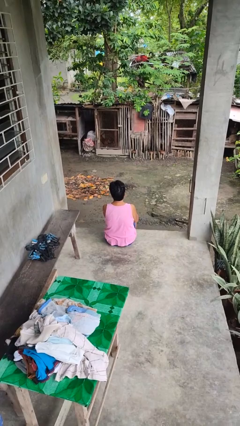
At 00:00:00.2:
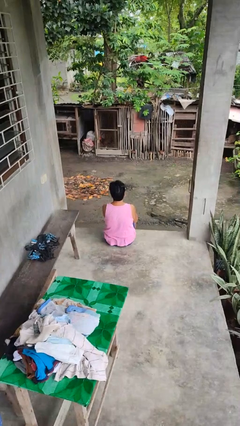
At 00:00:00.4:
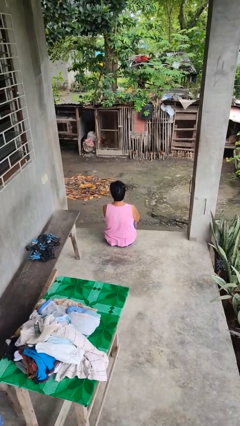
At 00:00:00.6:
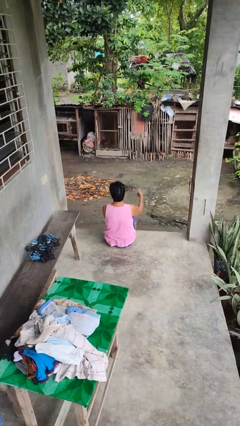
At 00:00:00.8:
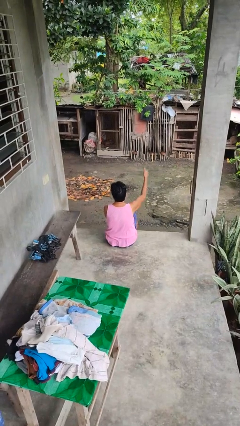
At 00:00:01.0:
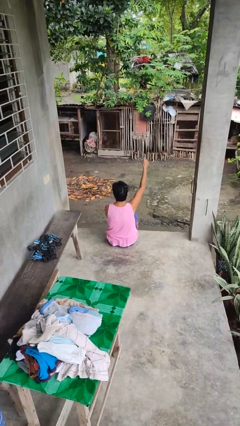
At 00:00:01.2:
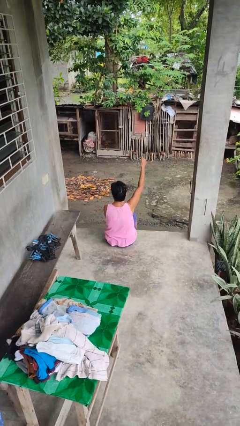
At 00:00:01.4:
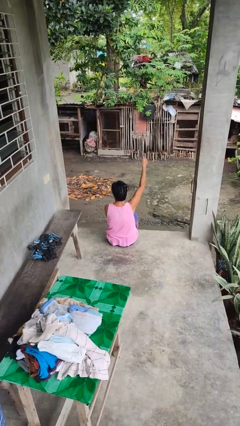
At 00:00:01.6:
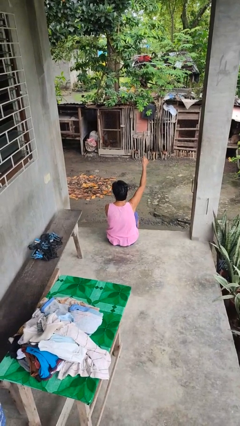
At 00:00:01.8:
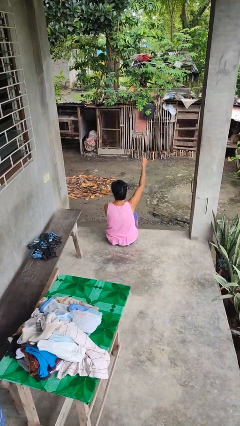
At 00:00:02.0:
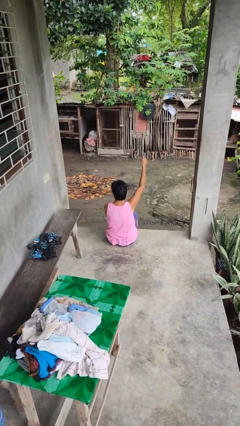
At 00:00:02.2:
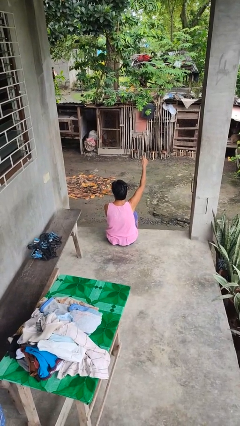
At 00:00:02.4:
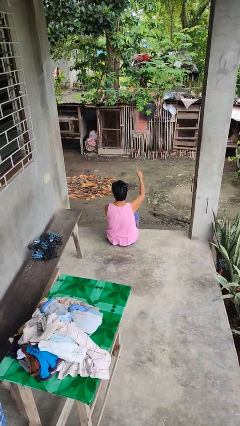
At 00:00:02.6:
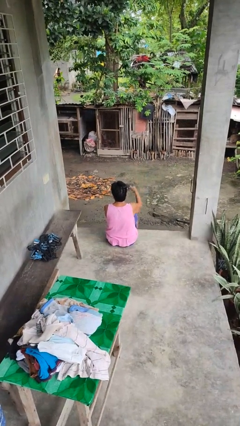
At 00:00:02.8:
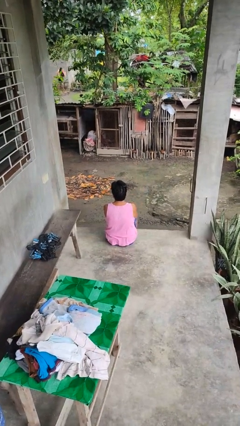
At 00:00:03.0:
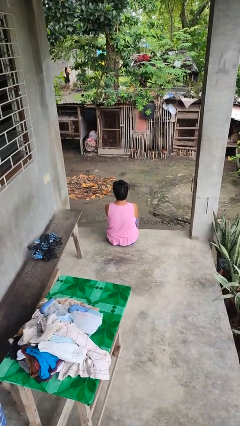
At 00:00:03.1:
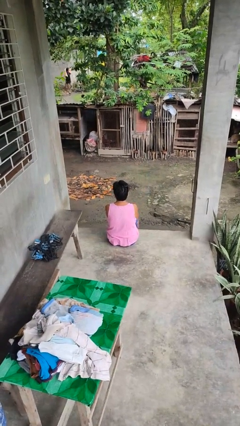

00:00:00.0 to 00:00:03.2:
person gestures thumbs up

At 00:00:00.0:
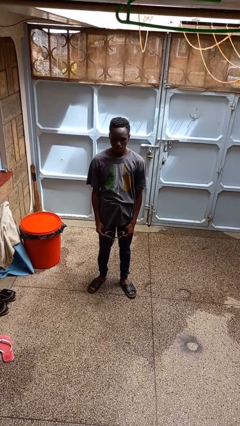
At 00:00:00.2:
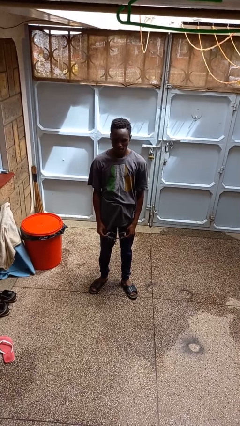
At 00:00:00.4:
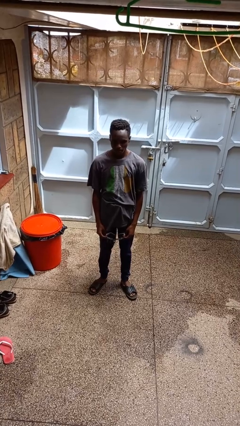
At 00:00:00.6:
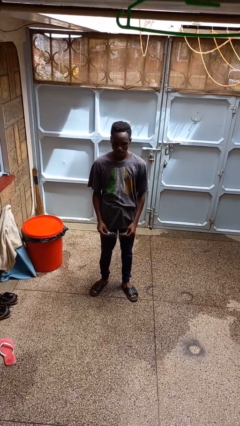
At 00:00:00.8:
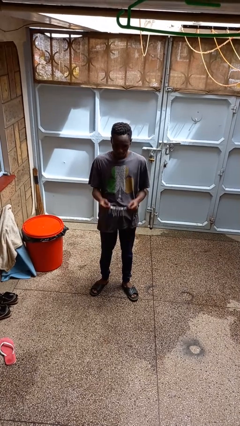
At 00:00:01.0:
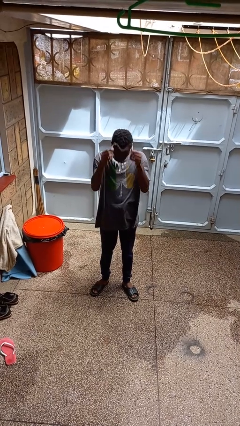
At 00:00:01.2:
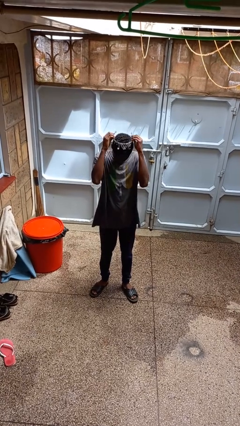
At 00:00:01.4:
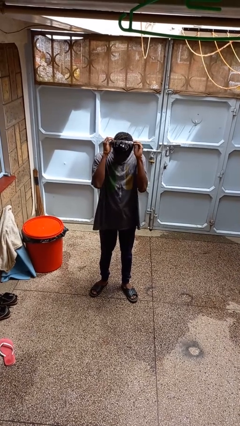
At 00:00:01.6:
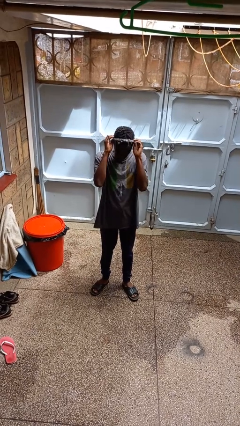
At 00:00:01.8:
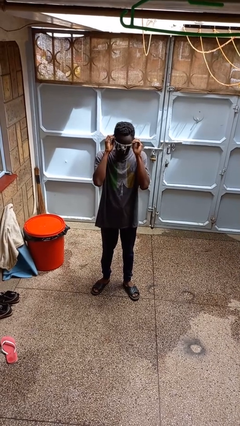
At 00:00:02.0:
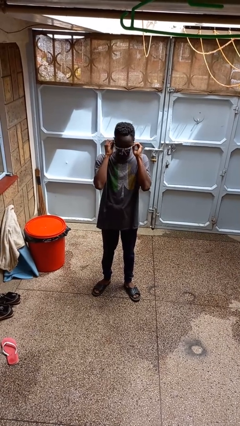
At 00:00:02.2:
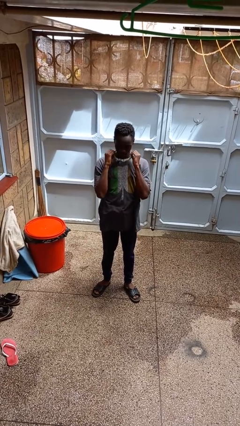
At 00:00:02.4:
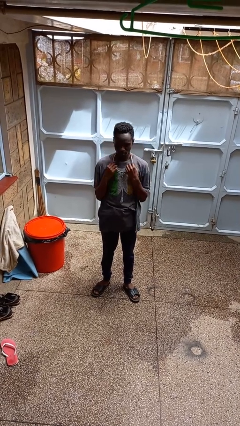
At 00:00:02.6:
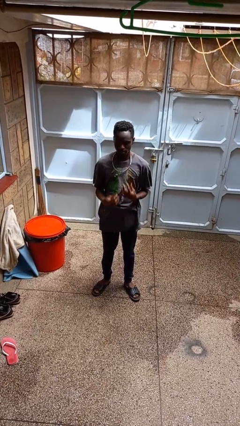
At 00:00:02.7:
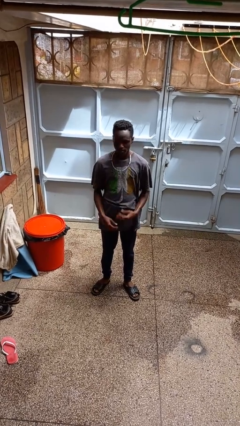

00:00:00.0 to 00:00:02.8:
person puts on necklace

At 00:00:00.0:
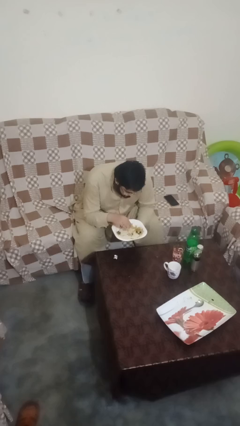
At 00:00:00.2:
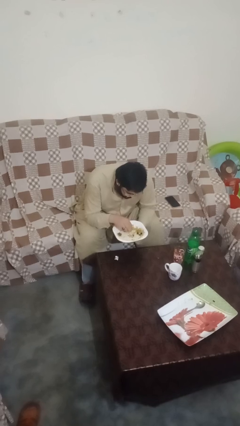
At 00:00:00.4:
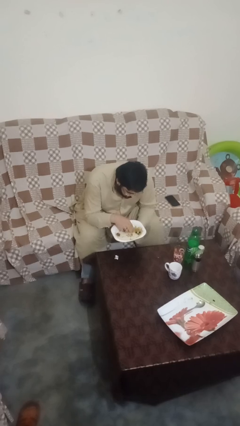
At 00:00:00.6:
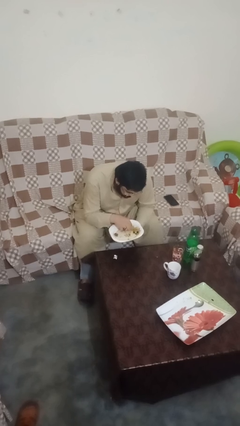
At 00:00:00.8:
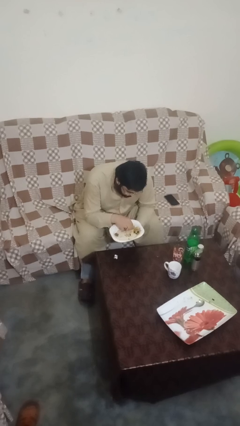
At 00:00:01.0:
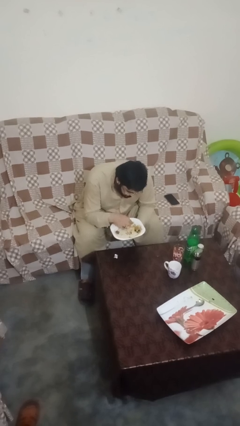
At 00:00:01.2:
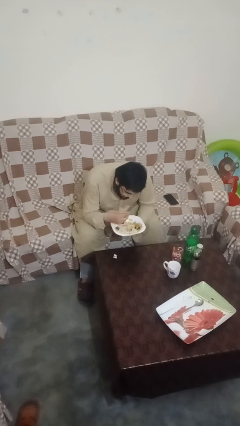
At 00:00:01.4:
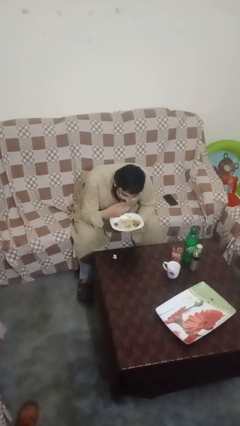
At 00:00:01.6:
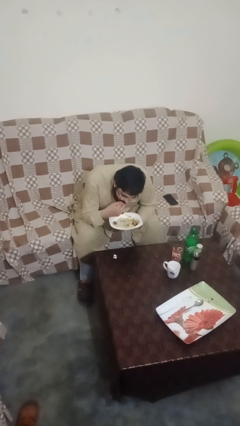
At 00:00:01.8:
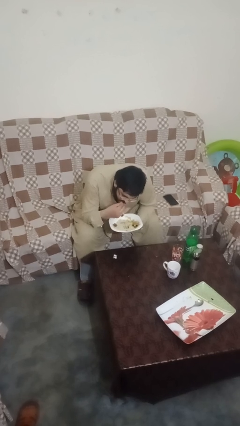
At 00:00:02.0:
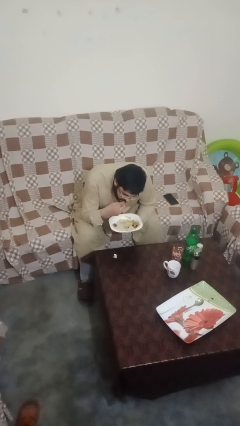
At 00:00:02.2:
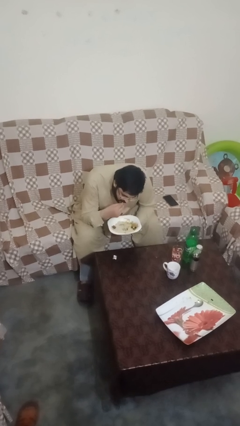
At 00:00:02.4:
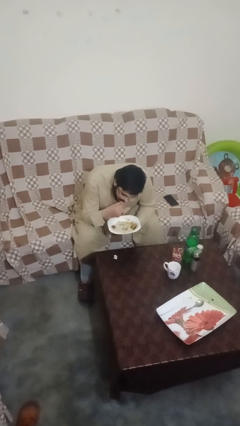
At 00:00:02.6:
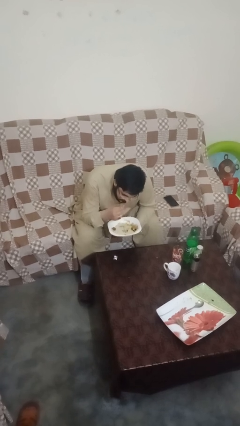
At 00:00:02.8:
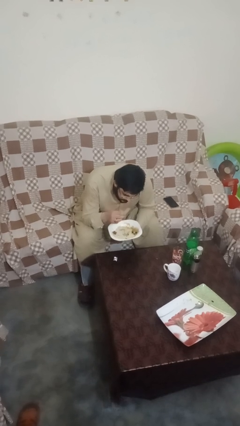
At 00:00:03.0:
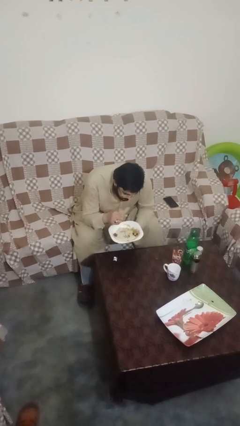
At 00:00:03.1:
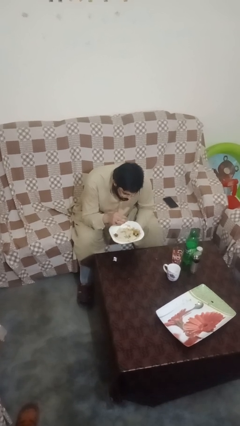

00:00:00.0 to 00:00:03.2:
person eats with hands

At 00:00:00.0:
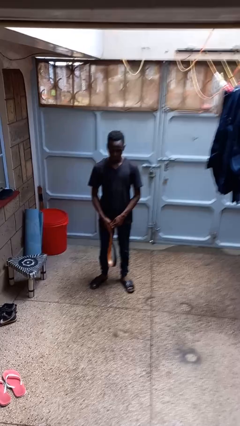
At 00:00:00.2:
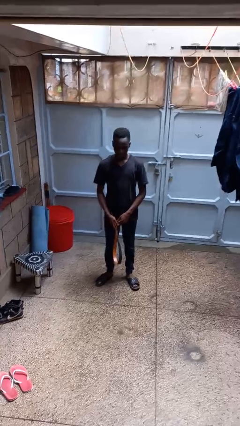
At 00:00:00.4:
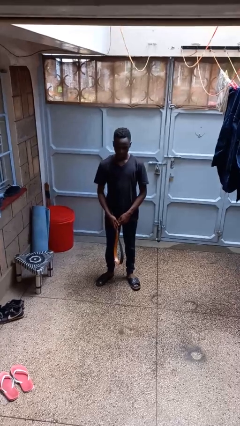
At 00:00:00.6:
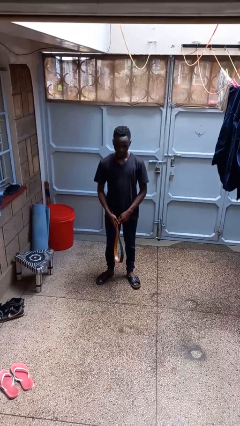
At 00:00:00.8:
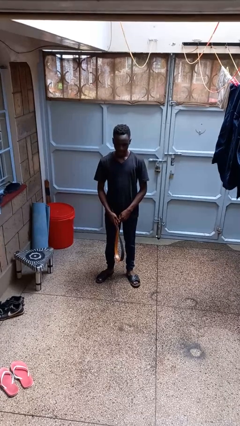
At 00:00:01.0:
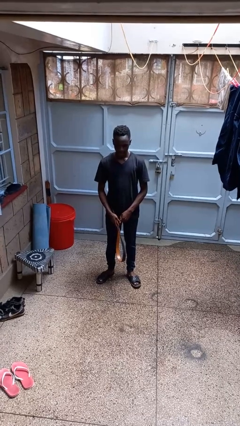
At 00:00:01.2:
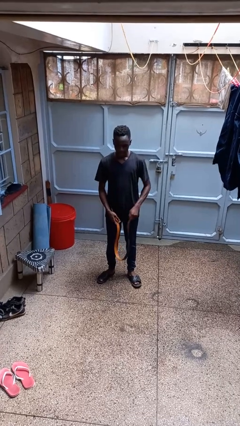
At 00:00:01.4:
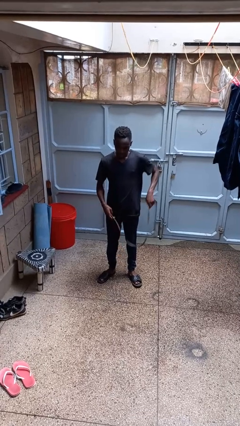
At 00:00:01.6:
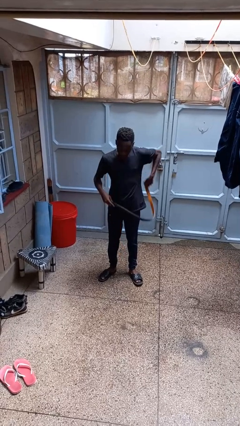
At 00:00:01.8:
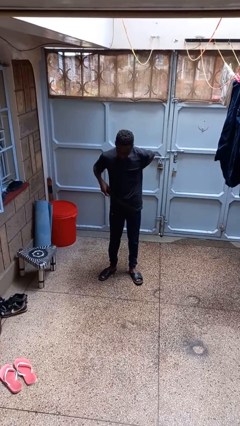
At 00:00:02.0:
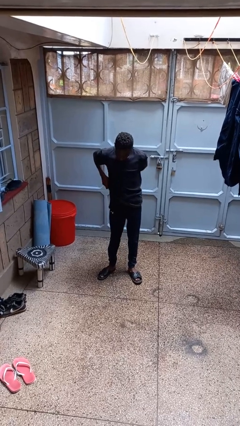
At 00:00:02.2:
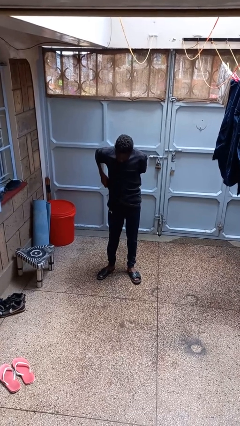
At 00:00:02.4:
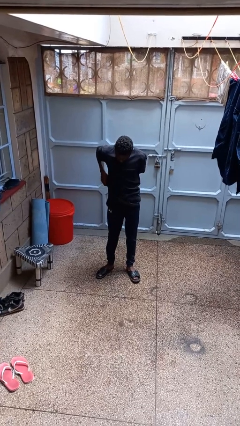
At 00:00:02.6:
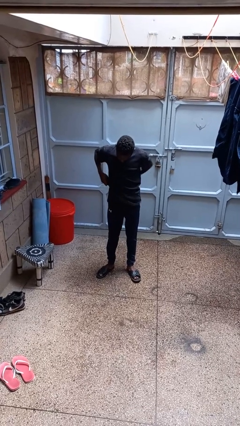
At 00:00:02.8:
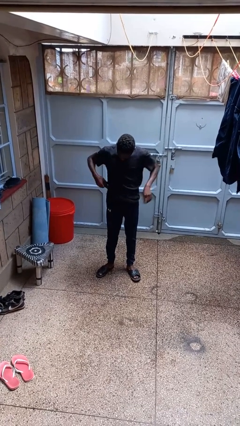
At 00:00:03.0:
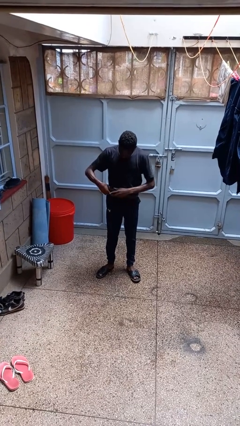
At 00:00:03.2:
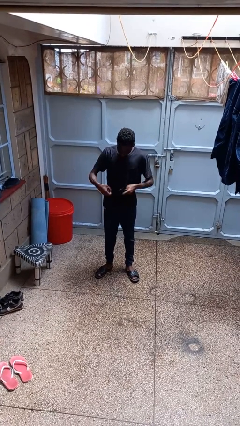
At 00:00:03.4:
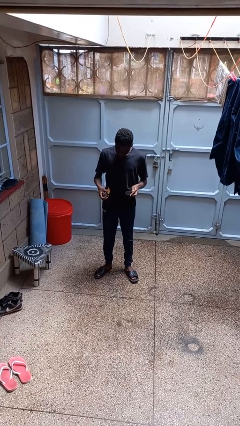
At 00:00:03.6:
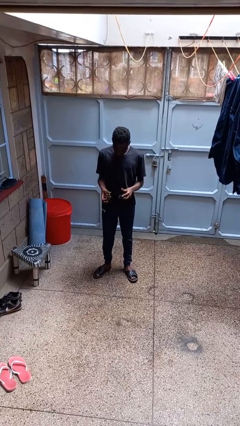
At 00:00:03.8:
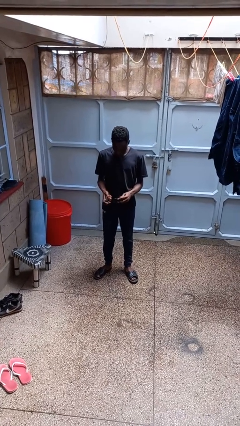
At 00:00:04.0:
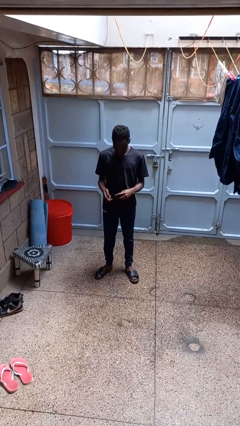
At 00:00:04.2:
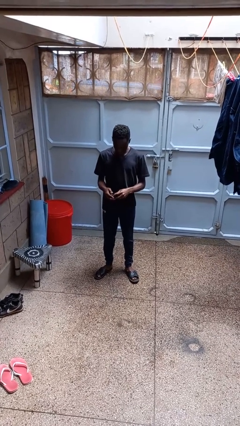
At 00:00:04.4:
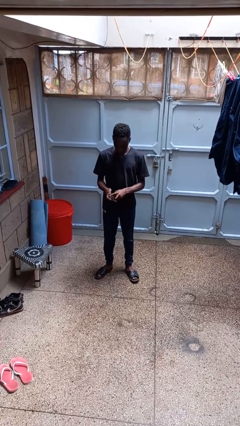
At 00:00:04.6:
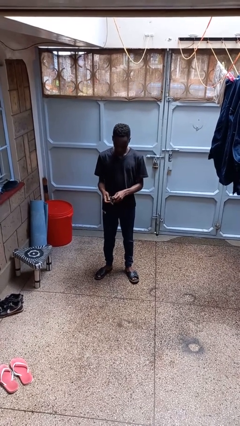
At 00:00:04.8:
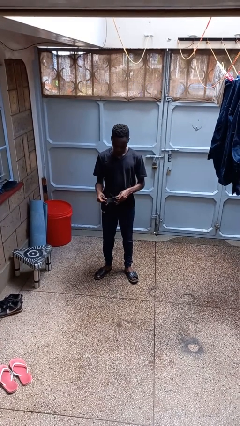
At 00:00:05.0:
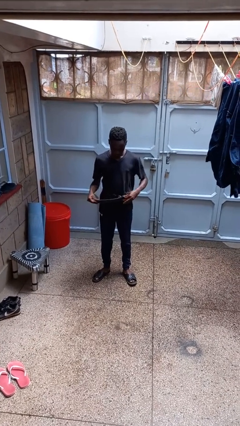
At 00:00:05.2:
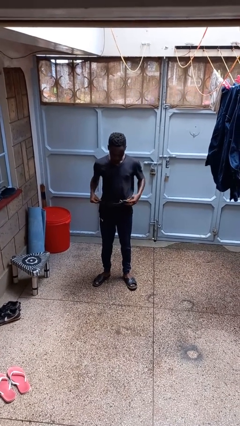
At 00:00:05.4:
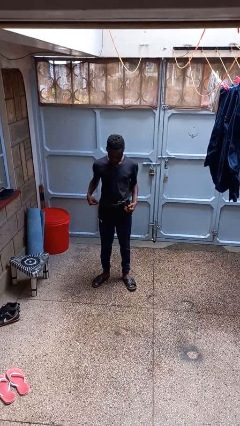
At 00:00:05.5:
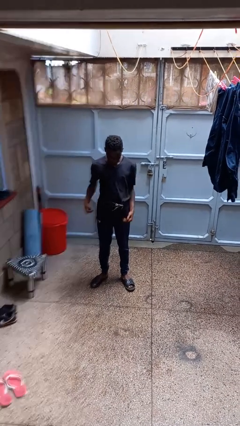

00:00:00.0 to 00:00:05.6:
person puts on belt

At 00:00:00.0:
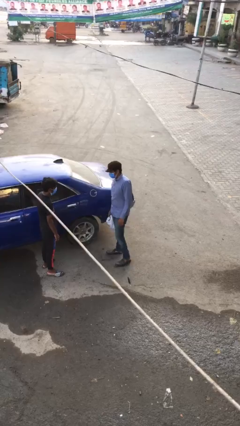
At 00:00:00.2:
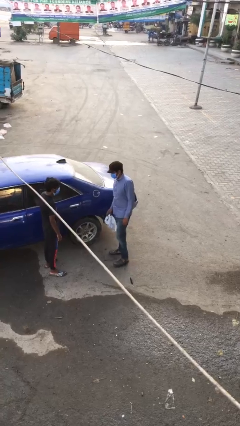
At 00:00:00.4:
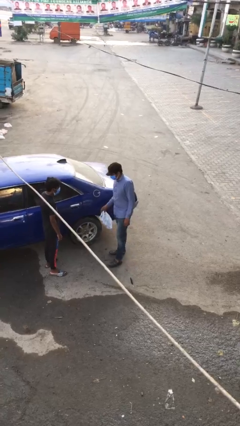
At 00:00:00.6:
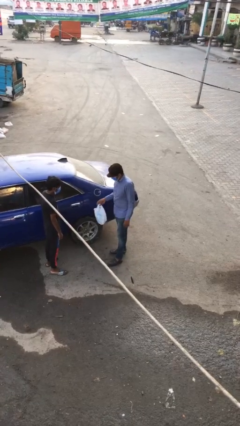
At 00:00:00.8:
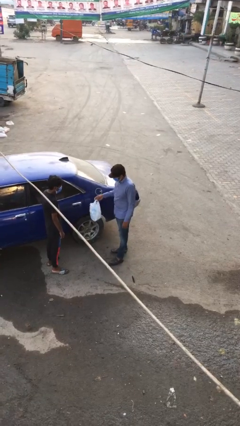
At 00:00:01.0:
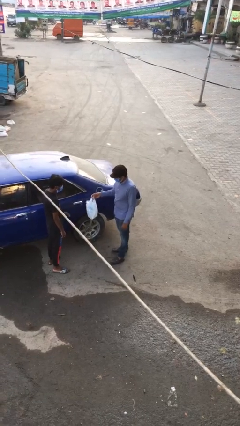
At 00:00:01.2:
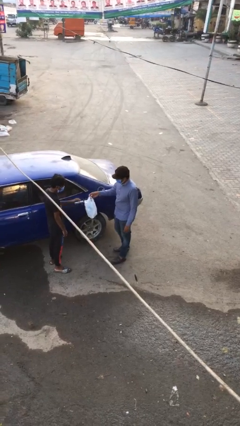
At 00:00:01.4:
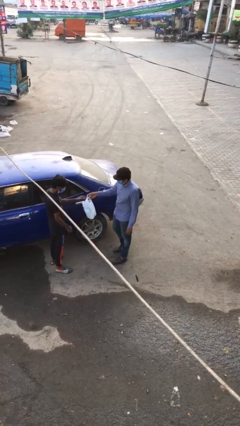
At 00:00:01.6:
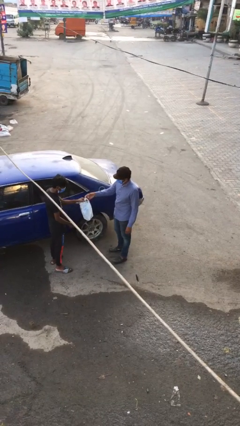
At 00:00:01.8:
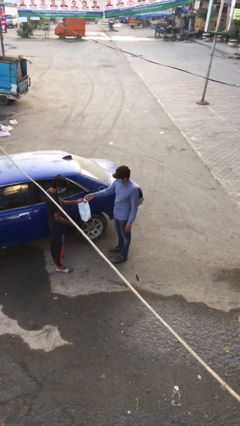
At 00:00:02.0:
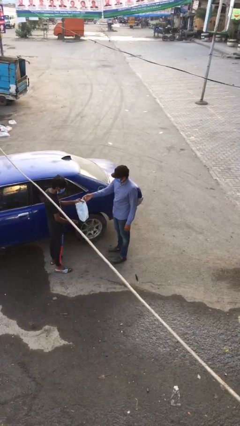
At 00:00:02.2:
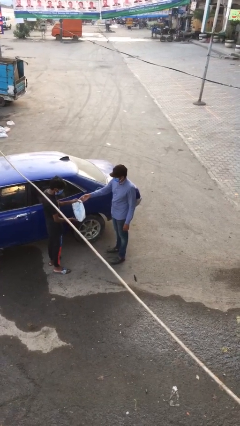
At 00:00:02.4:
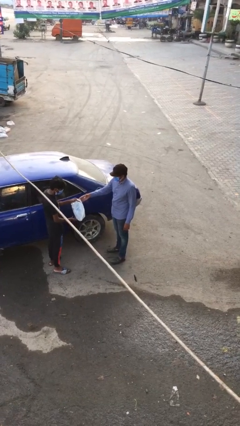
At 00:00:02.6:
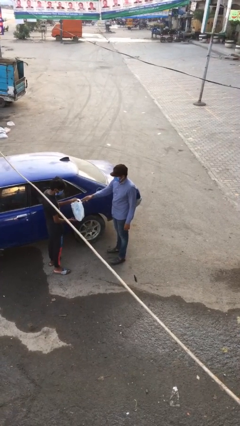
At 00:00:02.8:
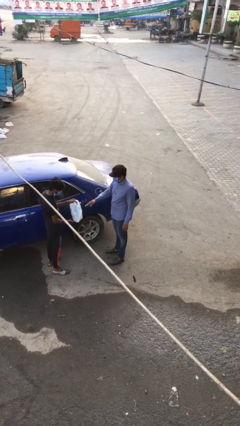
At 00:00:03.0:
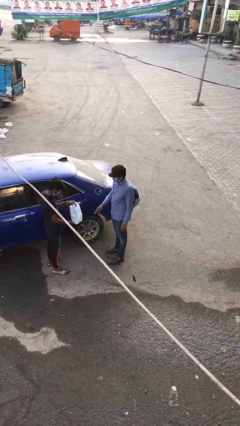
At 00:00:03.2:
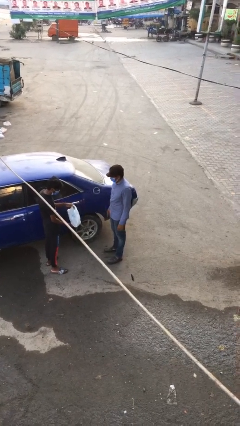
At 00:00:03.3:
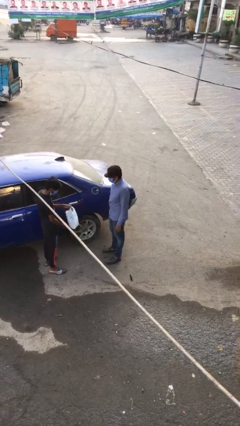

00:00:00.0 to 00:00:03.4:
person transfers object to person
